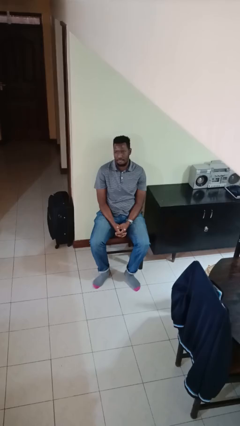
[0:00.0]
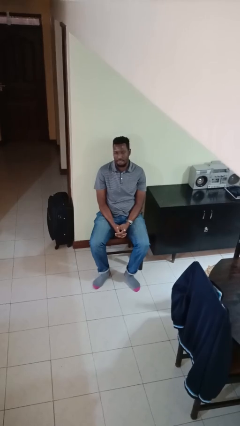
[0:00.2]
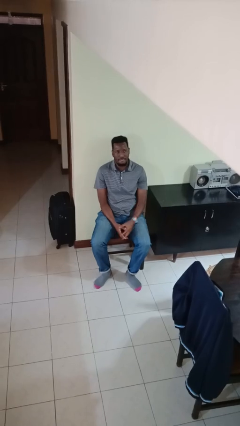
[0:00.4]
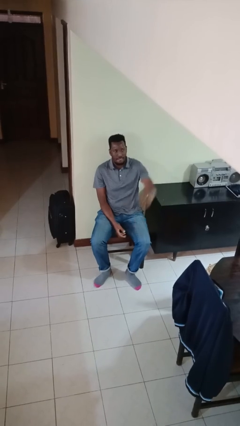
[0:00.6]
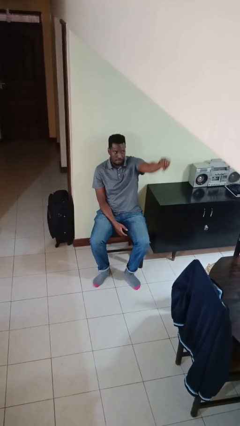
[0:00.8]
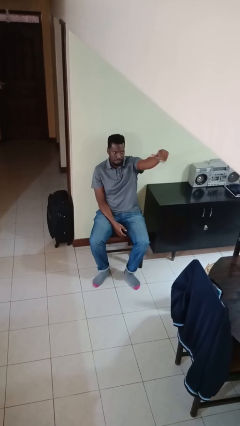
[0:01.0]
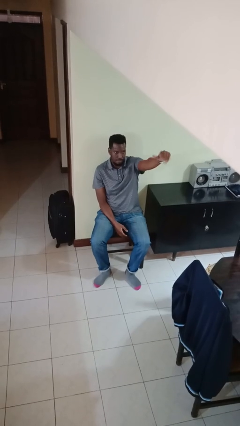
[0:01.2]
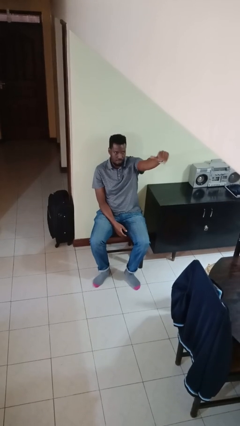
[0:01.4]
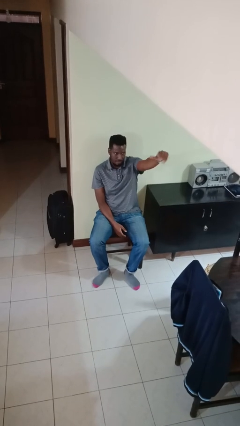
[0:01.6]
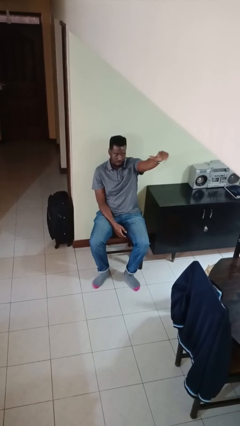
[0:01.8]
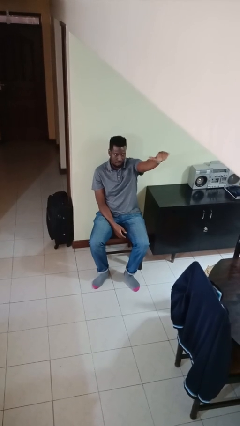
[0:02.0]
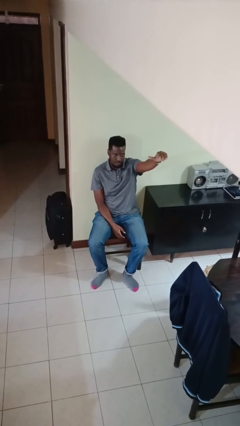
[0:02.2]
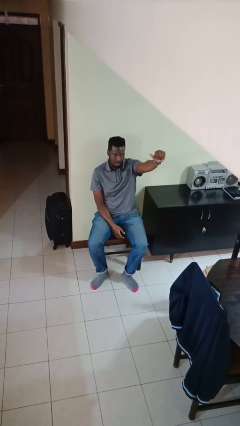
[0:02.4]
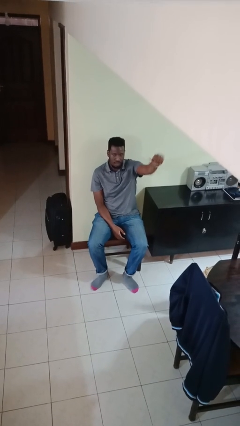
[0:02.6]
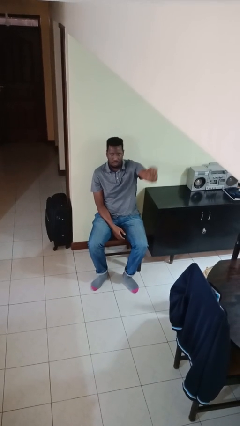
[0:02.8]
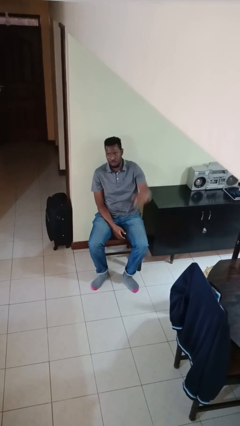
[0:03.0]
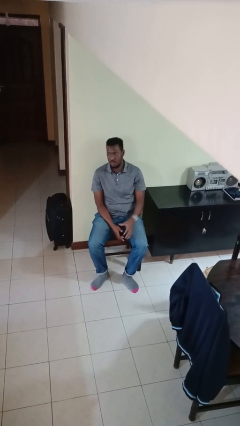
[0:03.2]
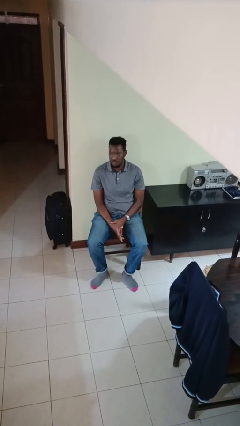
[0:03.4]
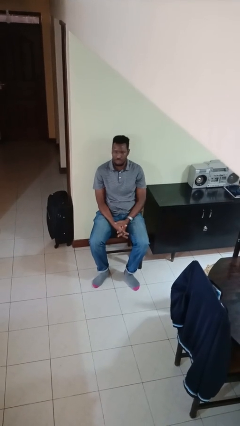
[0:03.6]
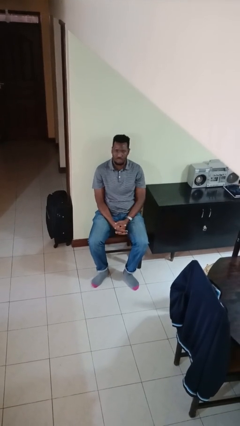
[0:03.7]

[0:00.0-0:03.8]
person gestures come here

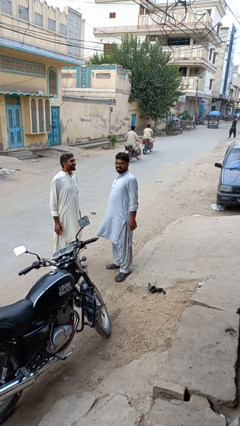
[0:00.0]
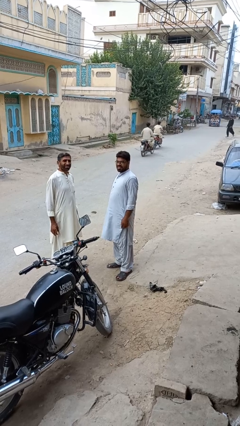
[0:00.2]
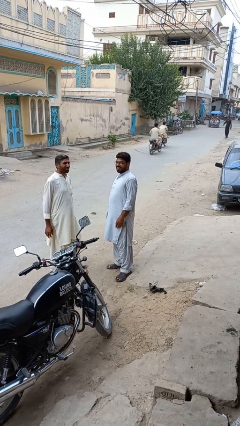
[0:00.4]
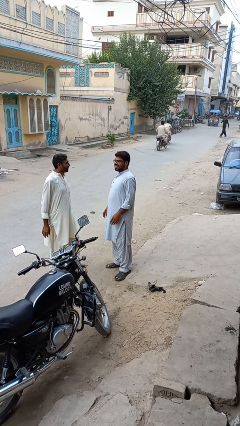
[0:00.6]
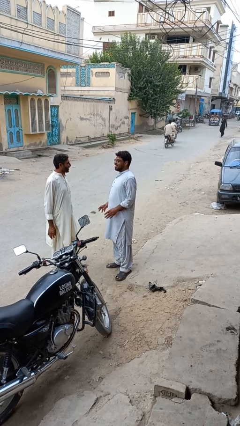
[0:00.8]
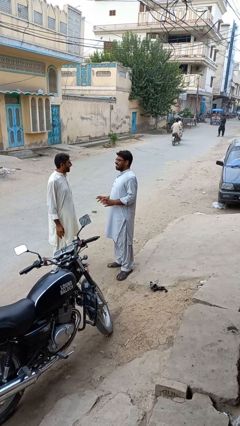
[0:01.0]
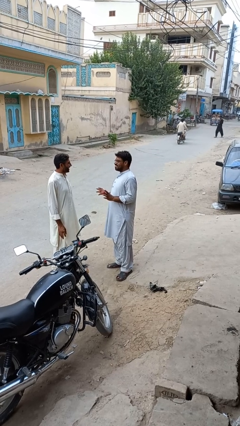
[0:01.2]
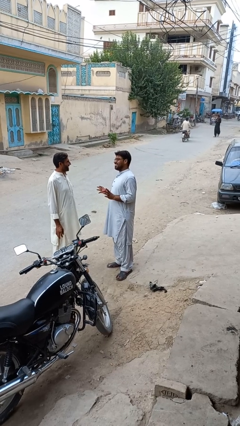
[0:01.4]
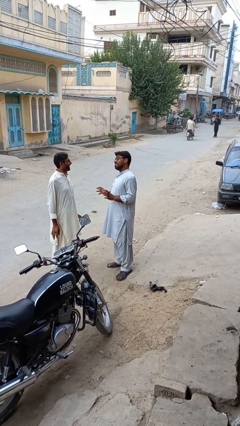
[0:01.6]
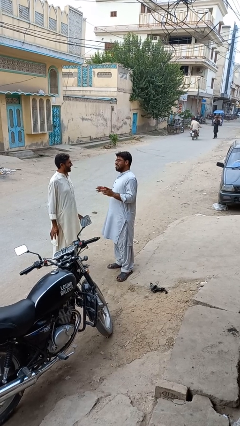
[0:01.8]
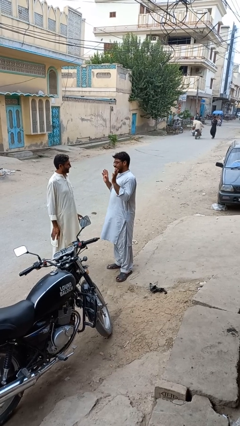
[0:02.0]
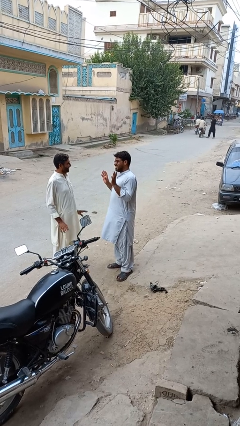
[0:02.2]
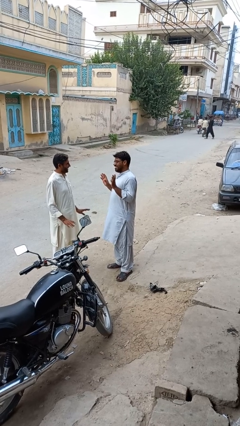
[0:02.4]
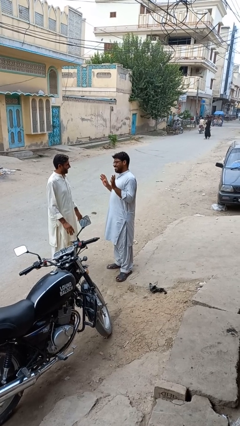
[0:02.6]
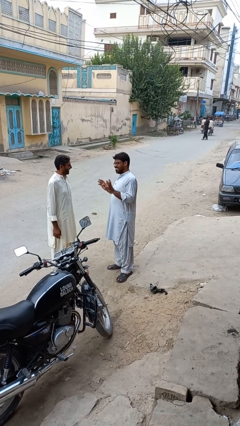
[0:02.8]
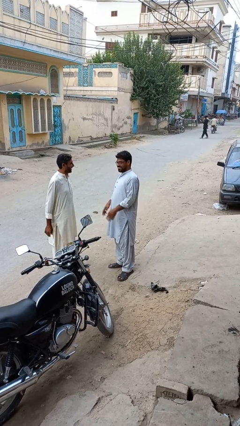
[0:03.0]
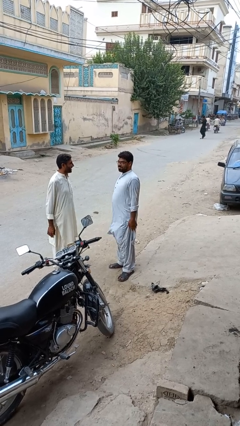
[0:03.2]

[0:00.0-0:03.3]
person laughs with person

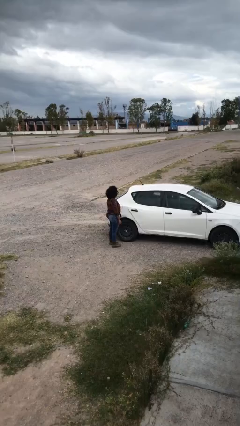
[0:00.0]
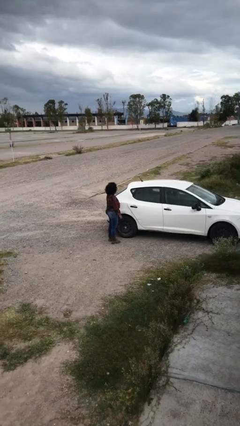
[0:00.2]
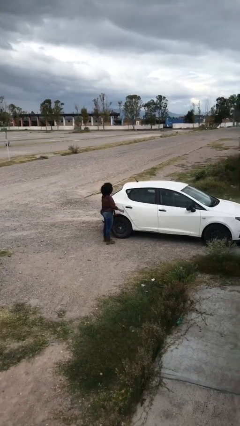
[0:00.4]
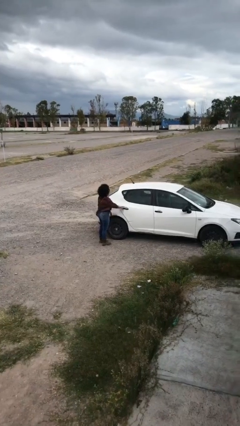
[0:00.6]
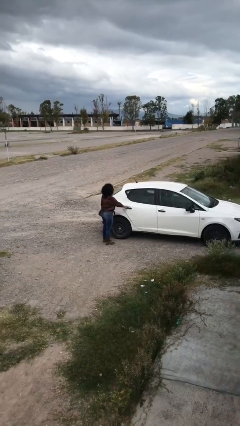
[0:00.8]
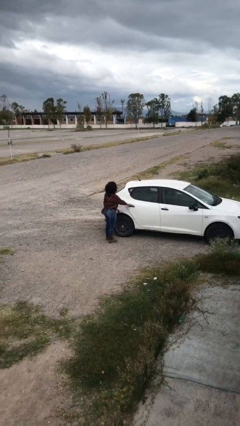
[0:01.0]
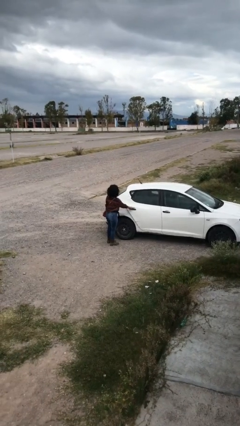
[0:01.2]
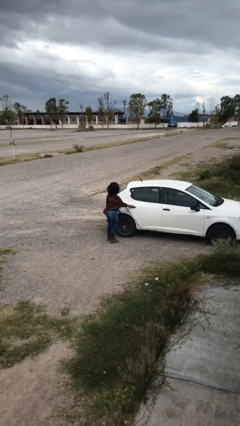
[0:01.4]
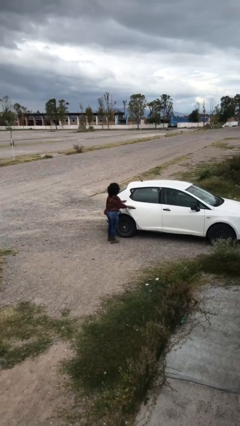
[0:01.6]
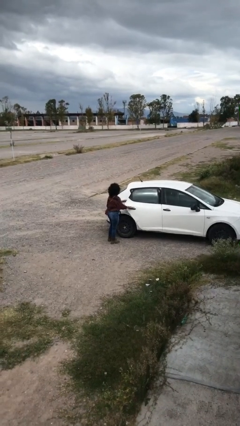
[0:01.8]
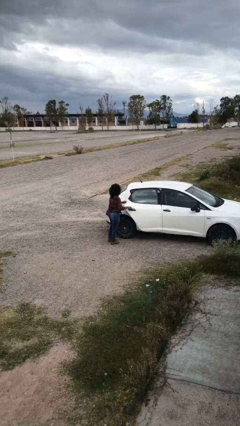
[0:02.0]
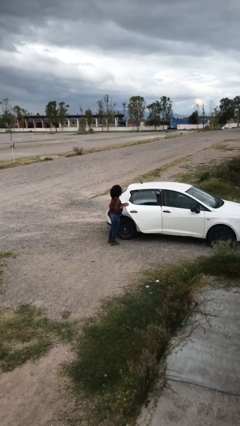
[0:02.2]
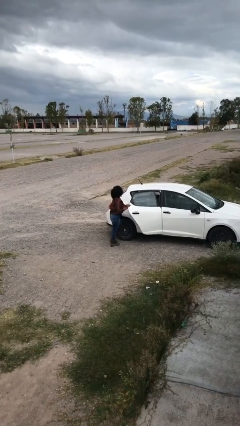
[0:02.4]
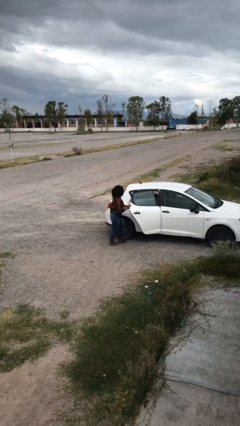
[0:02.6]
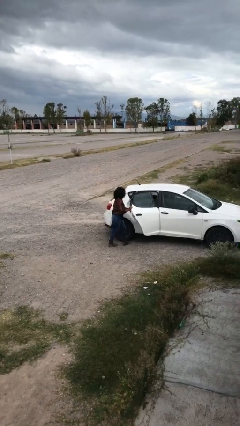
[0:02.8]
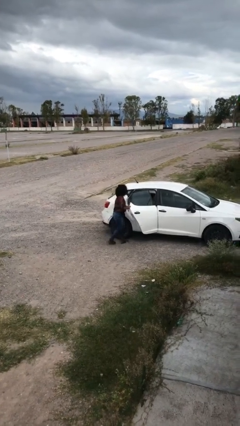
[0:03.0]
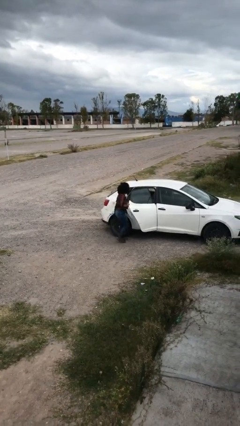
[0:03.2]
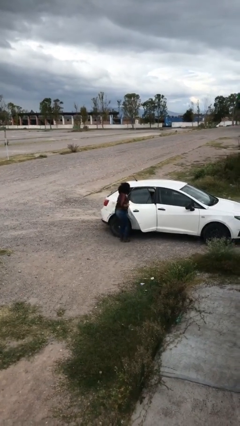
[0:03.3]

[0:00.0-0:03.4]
person opens car door

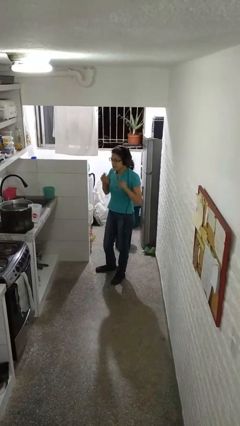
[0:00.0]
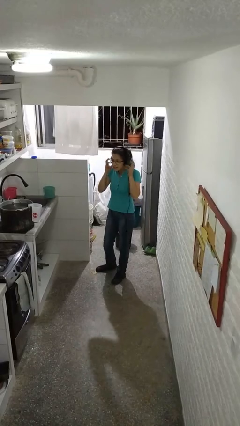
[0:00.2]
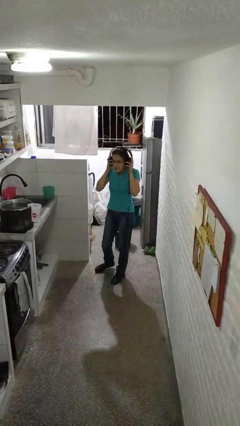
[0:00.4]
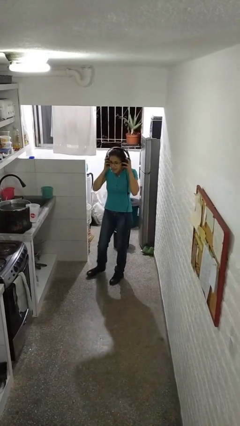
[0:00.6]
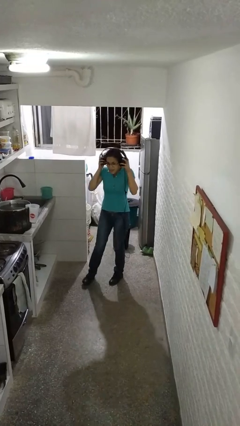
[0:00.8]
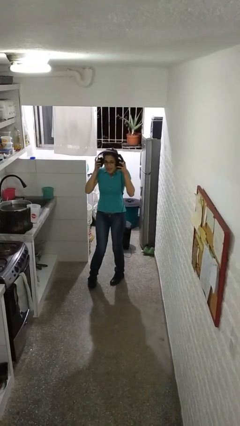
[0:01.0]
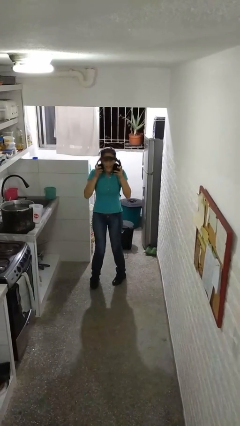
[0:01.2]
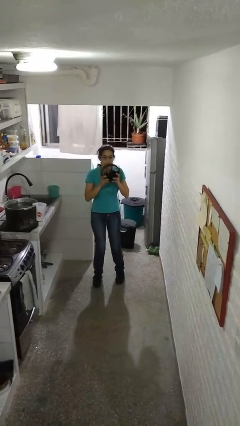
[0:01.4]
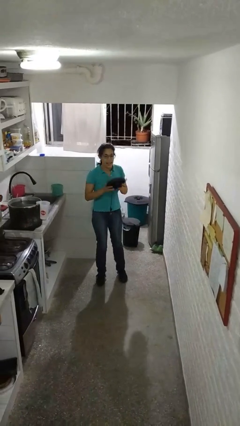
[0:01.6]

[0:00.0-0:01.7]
person takes off headphones

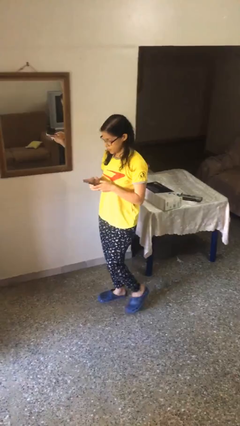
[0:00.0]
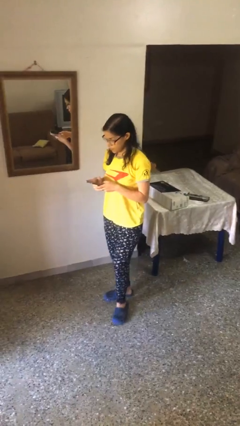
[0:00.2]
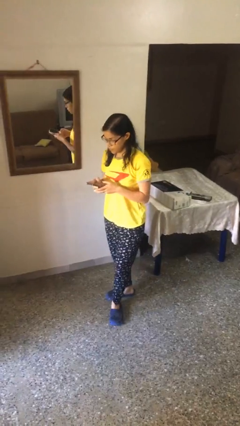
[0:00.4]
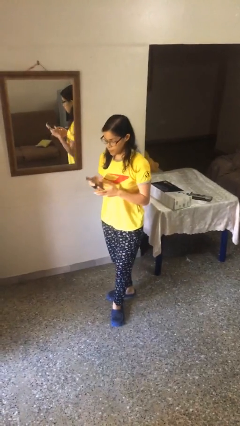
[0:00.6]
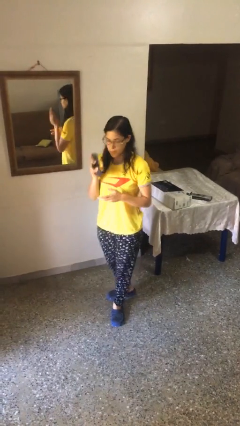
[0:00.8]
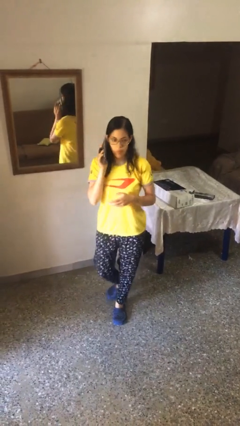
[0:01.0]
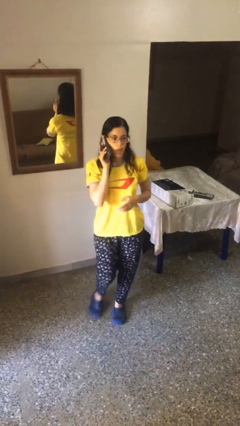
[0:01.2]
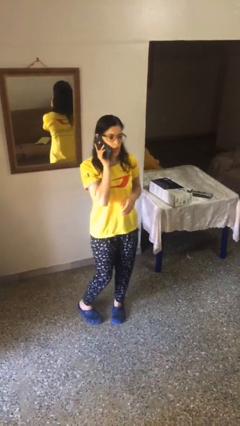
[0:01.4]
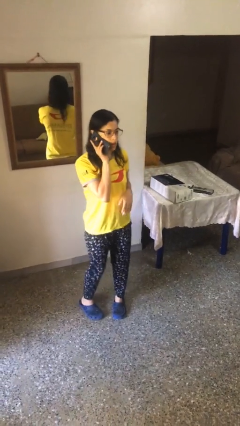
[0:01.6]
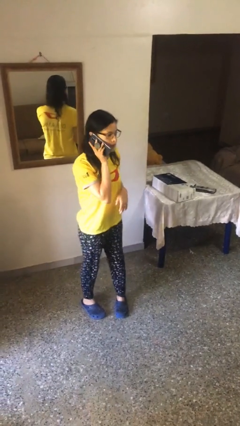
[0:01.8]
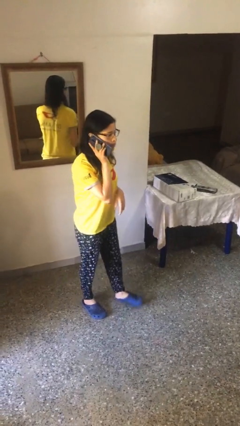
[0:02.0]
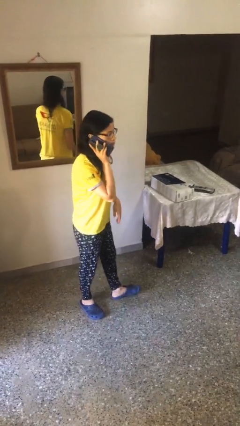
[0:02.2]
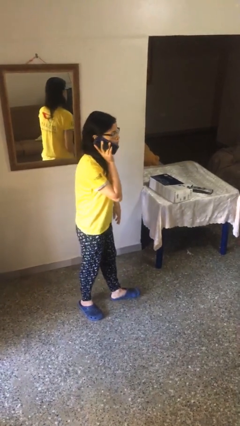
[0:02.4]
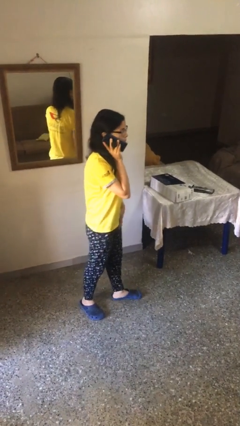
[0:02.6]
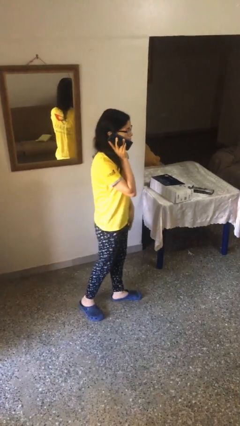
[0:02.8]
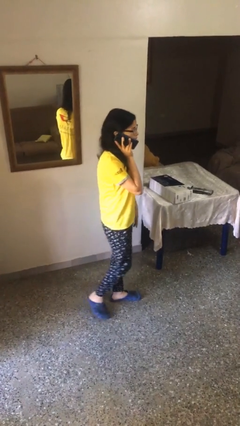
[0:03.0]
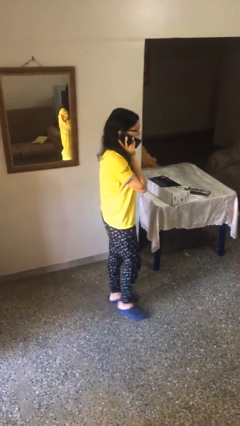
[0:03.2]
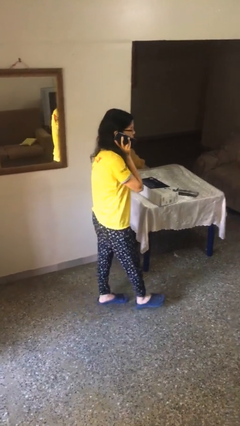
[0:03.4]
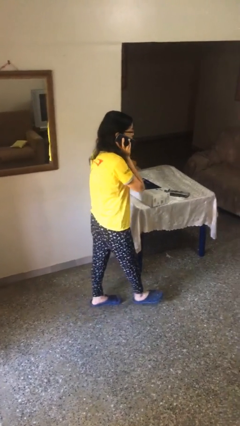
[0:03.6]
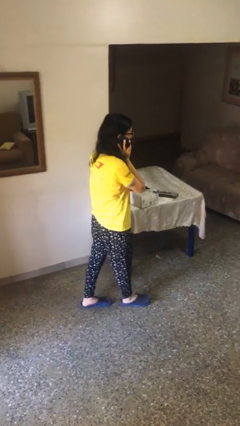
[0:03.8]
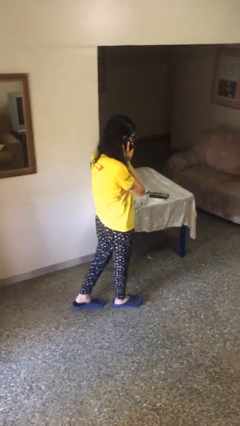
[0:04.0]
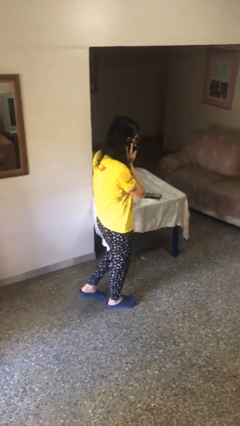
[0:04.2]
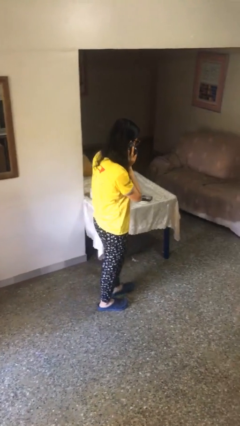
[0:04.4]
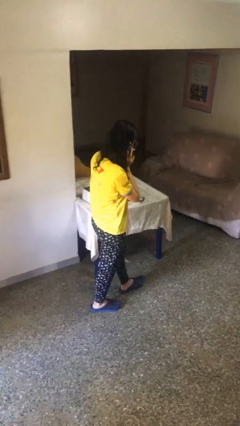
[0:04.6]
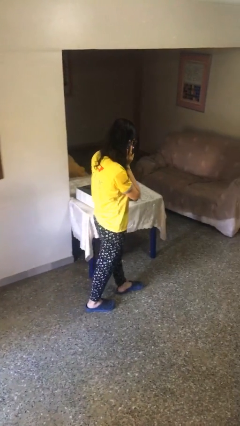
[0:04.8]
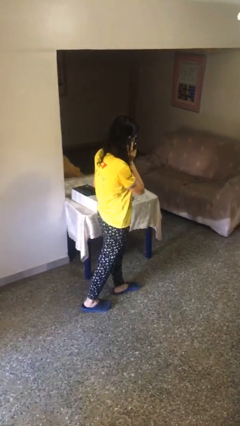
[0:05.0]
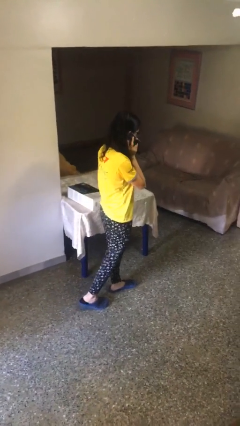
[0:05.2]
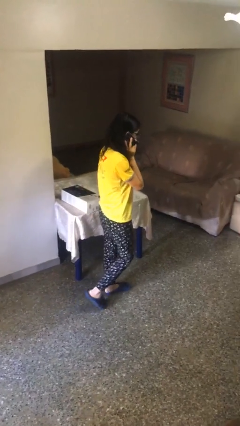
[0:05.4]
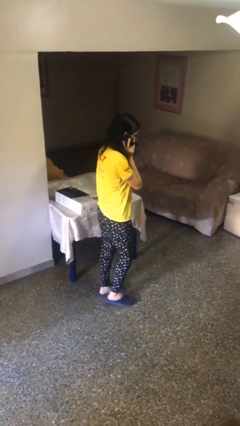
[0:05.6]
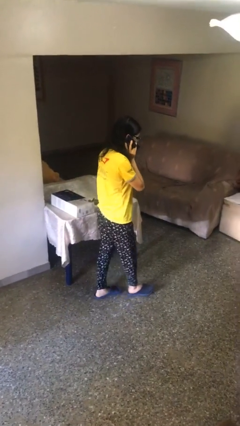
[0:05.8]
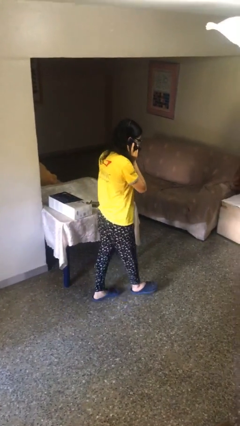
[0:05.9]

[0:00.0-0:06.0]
person talks on phone
